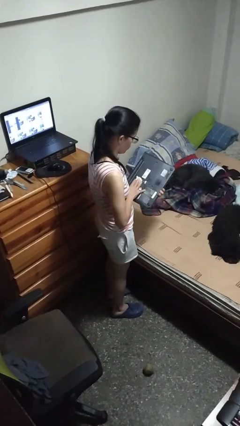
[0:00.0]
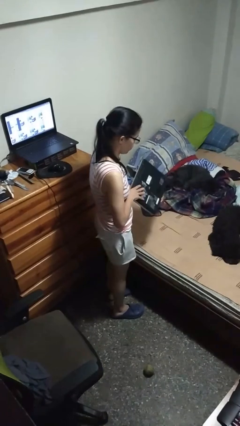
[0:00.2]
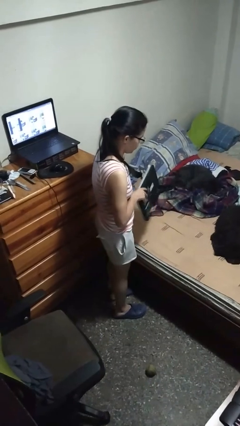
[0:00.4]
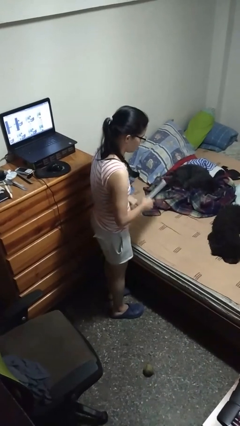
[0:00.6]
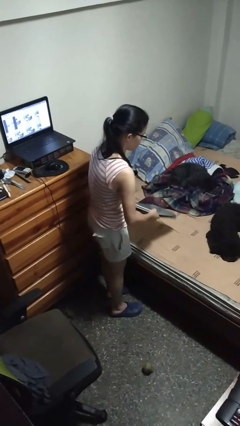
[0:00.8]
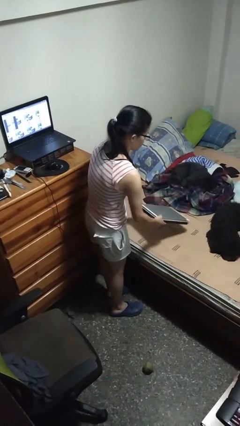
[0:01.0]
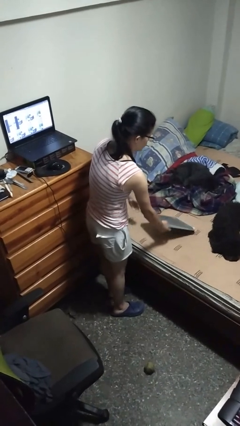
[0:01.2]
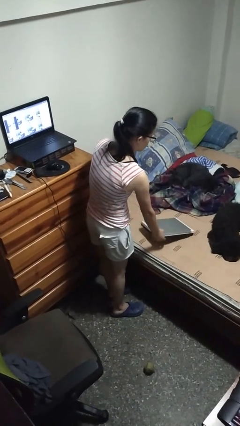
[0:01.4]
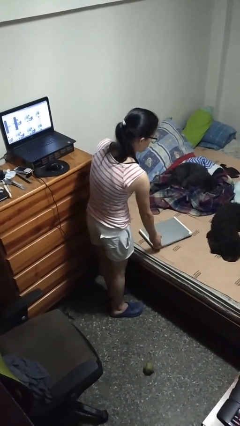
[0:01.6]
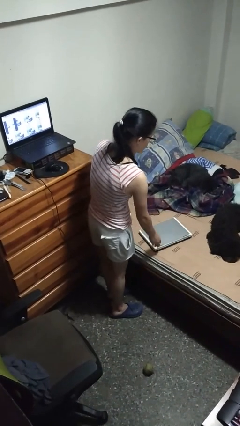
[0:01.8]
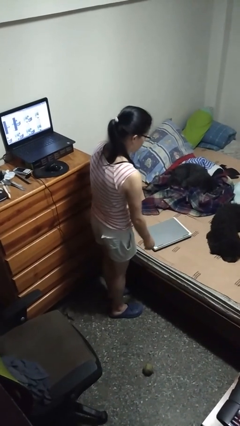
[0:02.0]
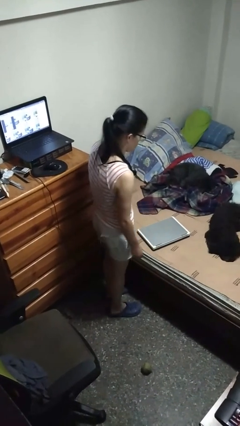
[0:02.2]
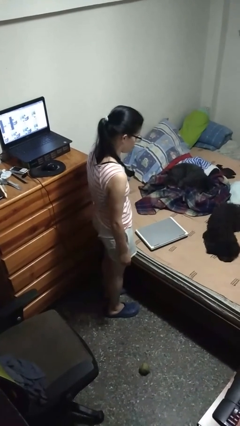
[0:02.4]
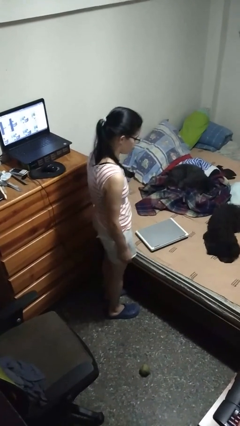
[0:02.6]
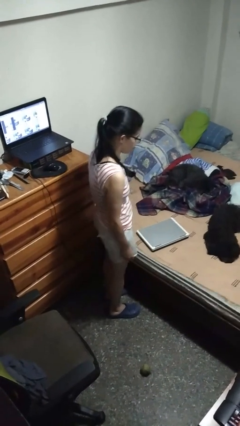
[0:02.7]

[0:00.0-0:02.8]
person puts down object on bed

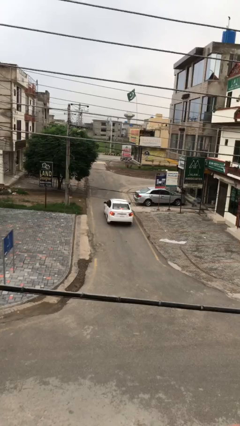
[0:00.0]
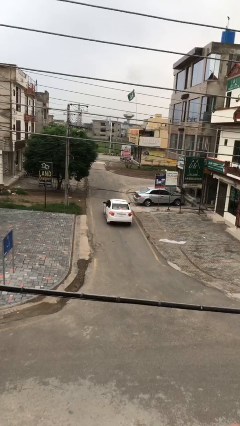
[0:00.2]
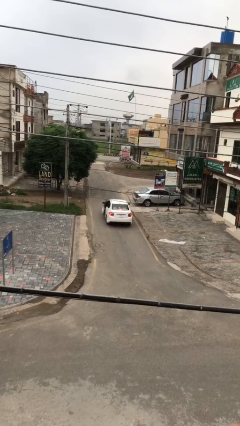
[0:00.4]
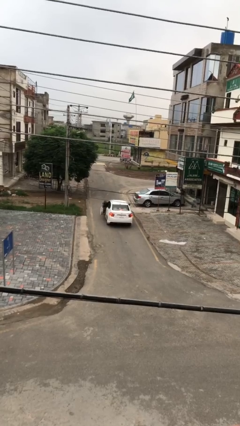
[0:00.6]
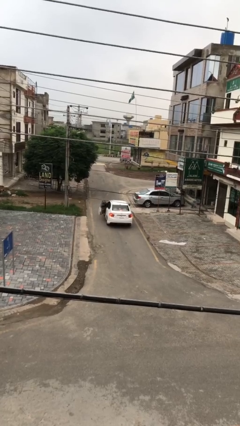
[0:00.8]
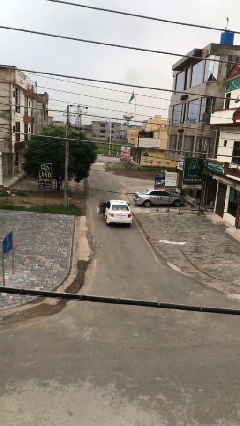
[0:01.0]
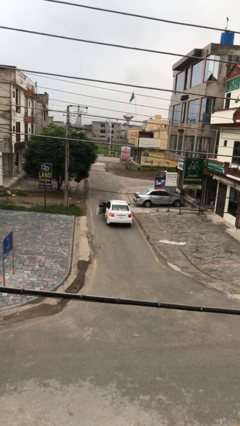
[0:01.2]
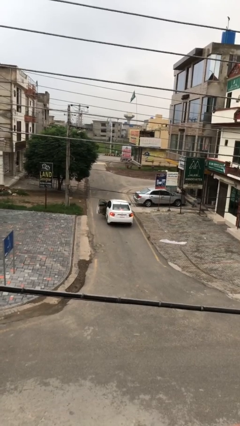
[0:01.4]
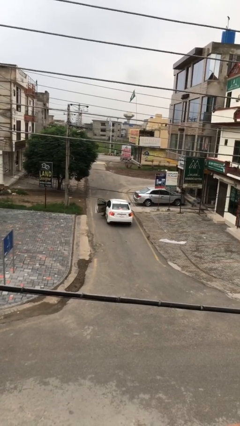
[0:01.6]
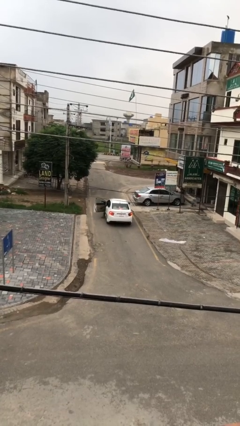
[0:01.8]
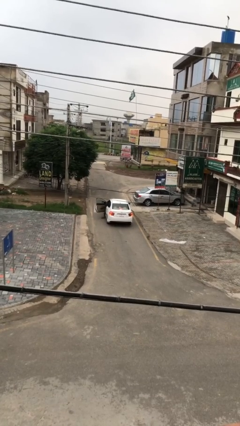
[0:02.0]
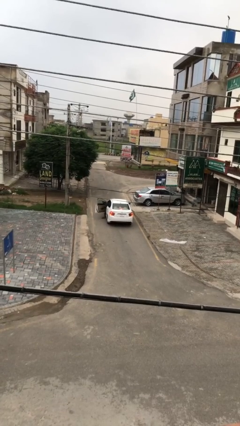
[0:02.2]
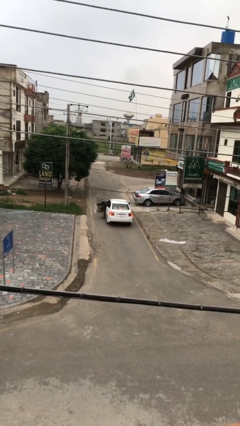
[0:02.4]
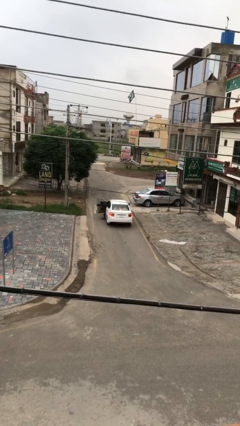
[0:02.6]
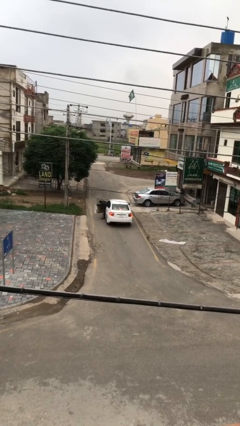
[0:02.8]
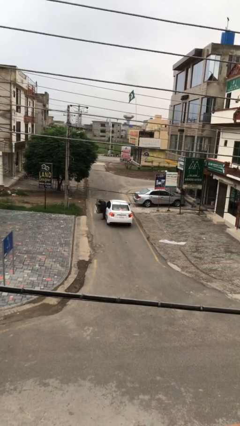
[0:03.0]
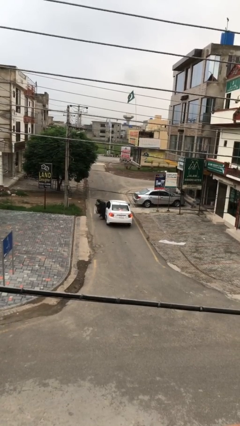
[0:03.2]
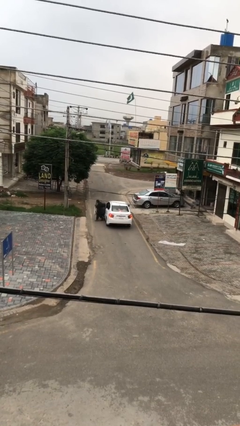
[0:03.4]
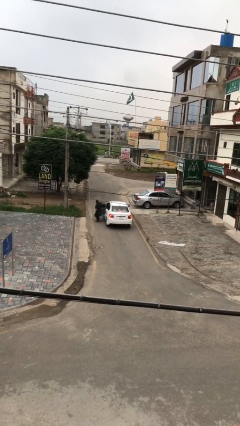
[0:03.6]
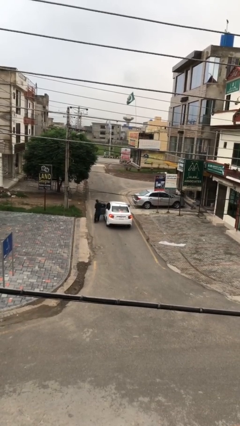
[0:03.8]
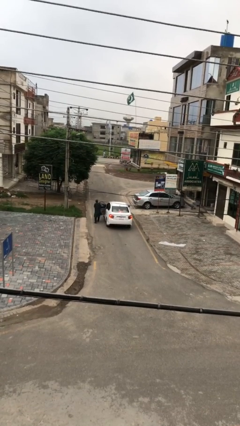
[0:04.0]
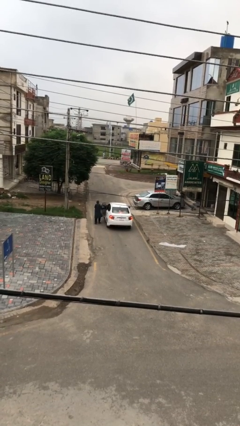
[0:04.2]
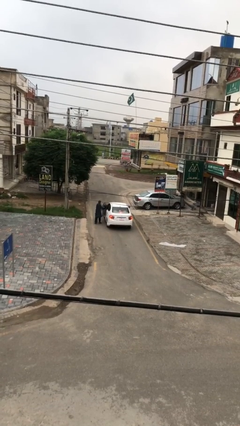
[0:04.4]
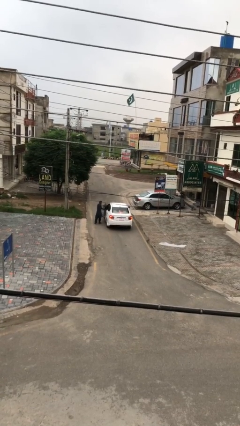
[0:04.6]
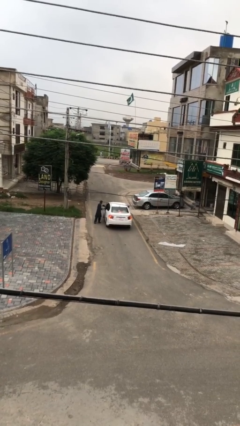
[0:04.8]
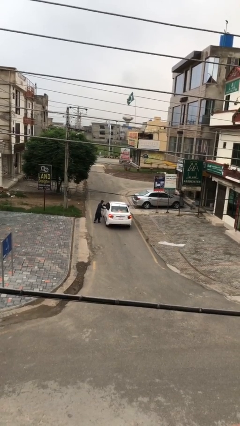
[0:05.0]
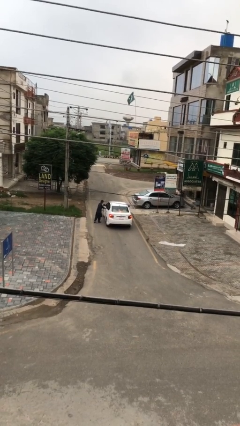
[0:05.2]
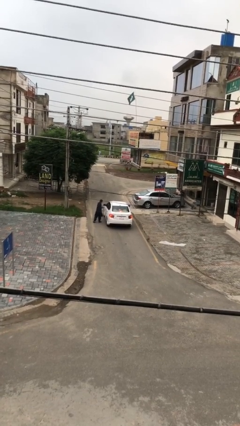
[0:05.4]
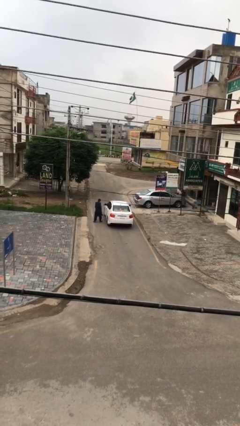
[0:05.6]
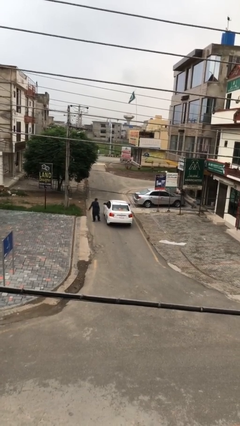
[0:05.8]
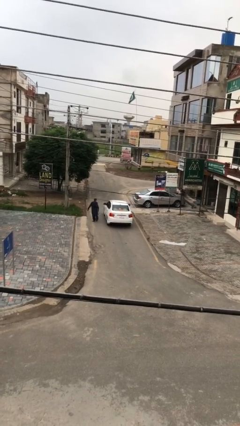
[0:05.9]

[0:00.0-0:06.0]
car drops off person

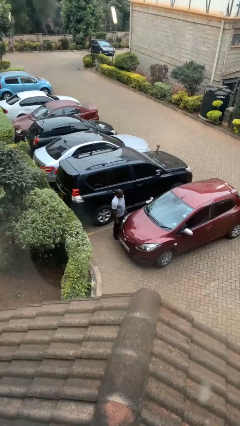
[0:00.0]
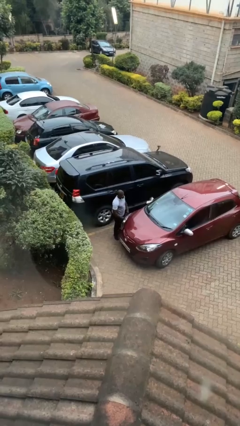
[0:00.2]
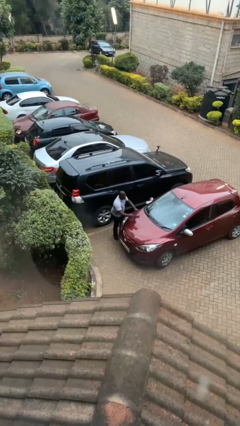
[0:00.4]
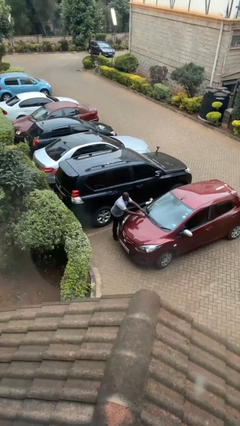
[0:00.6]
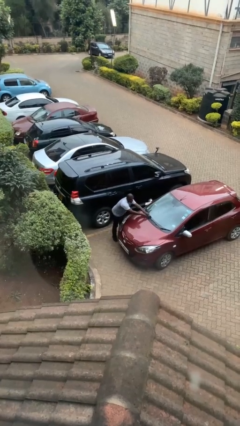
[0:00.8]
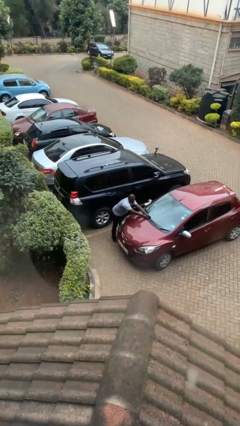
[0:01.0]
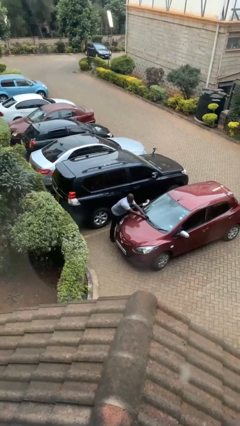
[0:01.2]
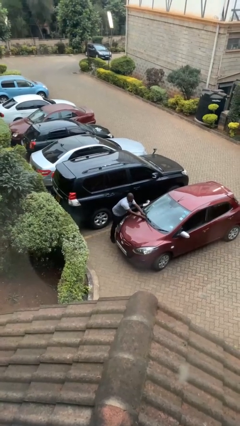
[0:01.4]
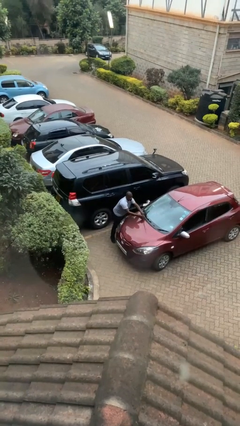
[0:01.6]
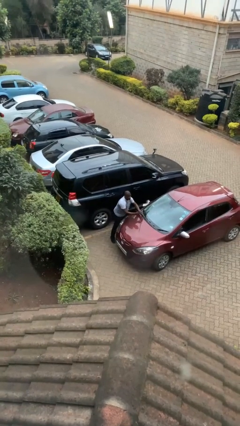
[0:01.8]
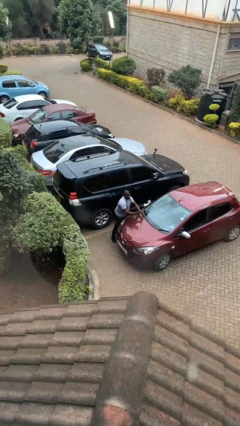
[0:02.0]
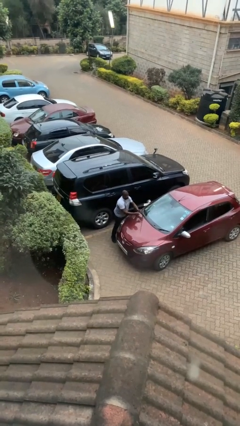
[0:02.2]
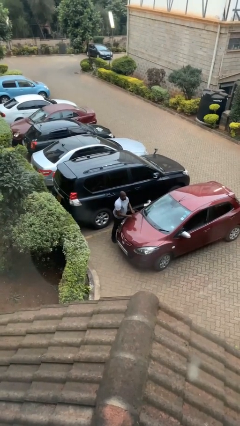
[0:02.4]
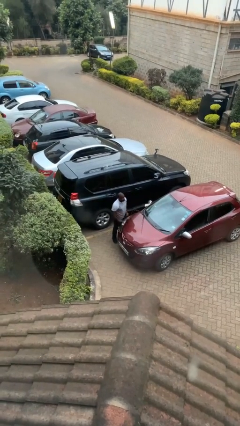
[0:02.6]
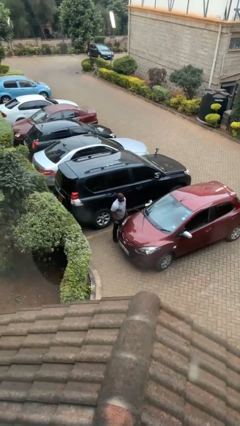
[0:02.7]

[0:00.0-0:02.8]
person flips up car wipers

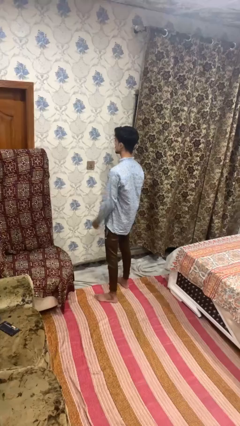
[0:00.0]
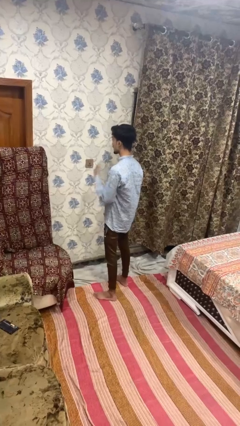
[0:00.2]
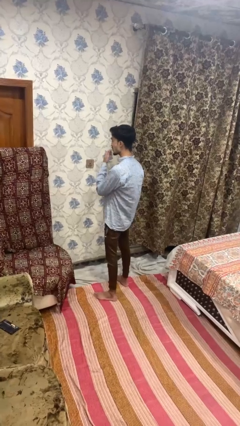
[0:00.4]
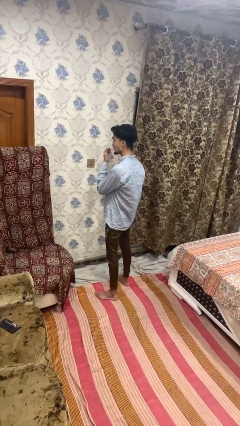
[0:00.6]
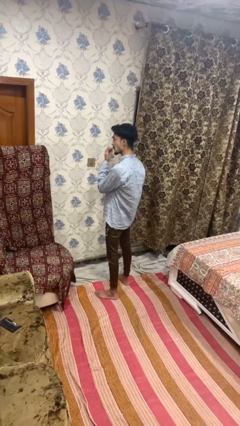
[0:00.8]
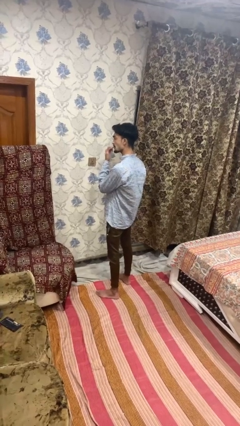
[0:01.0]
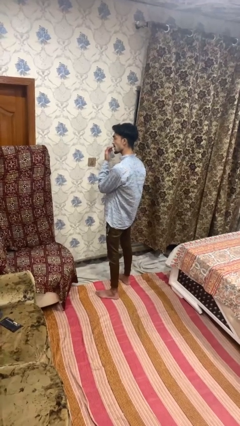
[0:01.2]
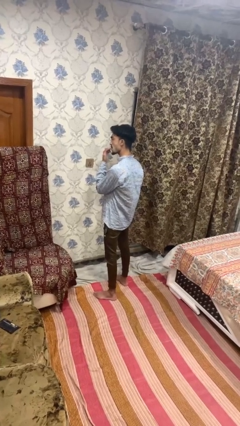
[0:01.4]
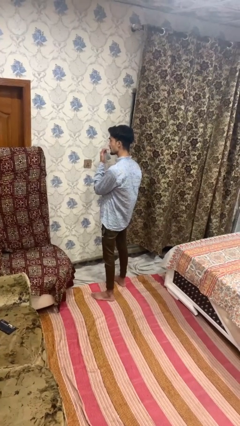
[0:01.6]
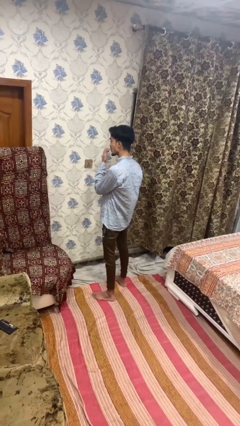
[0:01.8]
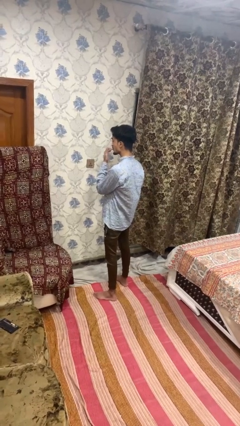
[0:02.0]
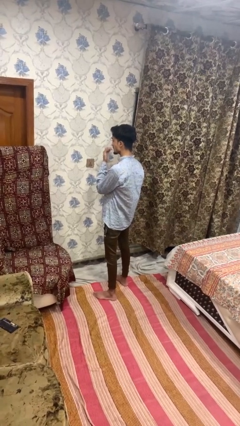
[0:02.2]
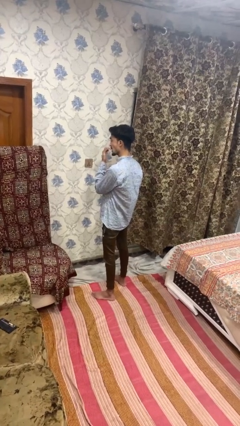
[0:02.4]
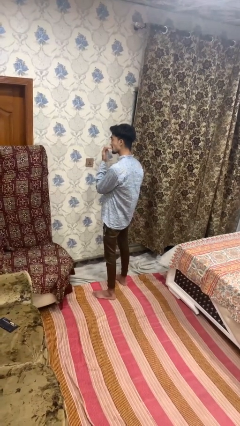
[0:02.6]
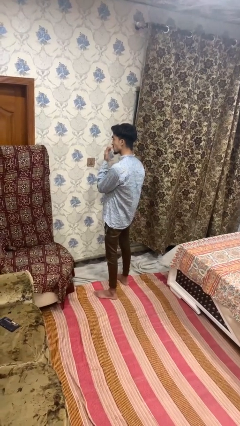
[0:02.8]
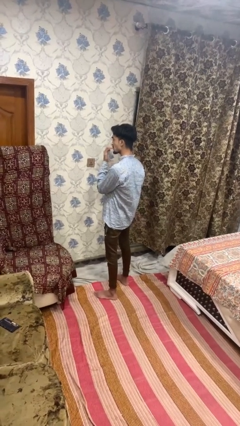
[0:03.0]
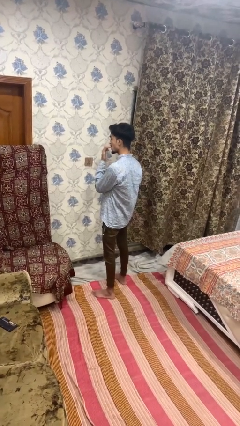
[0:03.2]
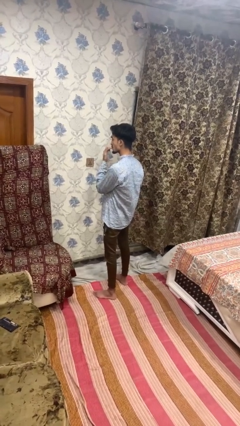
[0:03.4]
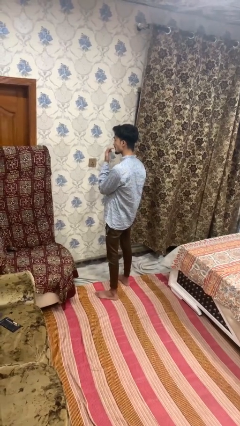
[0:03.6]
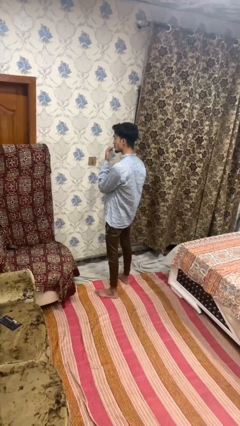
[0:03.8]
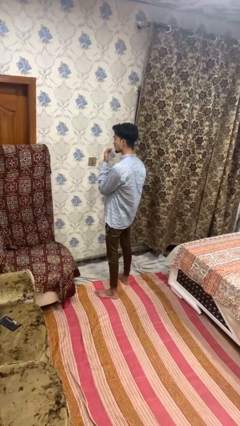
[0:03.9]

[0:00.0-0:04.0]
person licks fingers

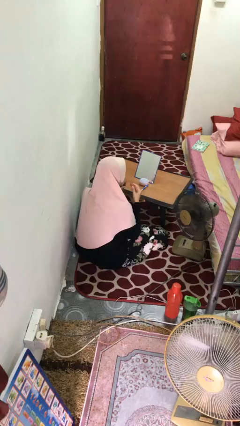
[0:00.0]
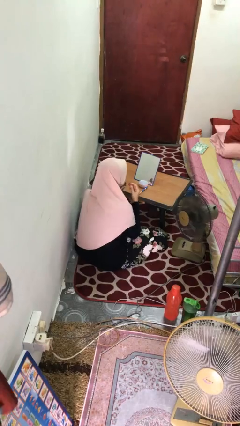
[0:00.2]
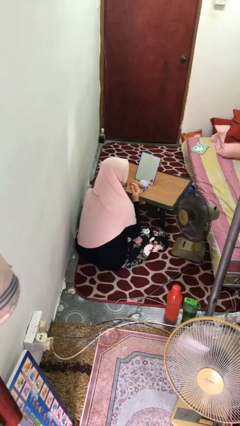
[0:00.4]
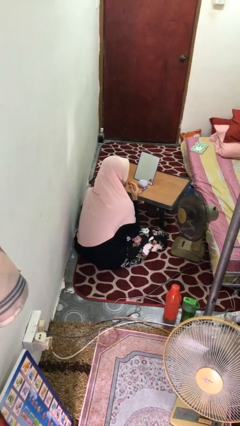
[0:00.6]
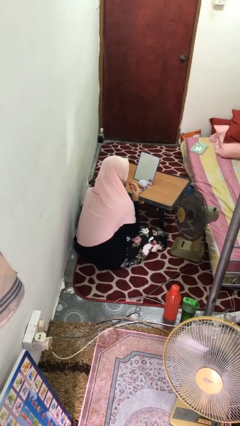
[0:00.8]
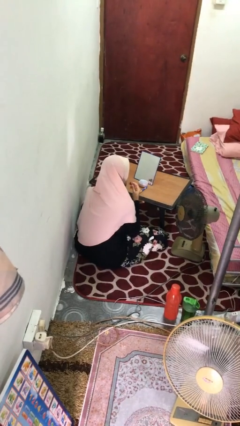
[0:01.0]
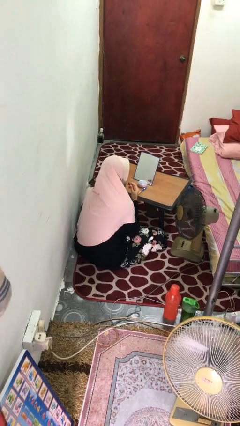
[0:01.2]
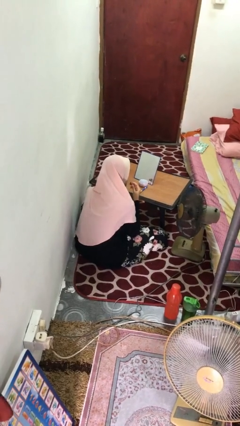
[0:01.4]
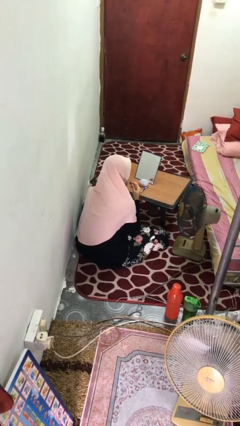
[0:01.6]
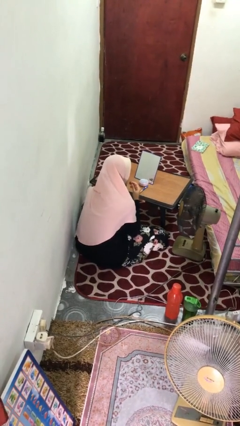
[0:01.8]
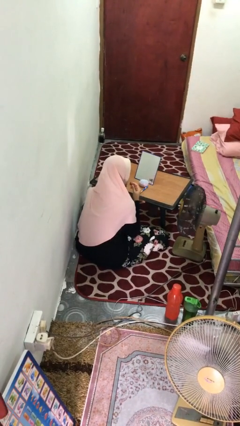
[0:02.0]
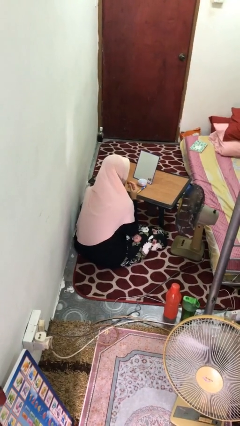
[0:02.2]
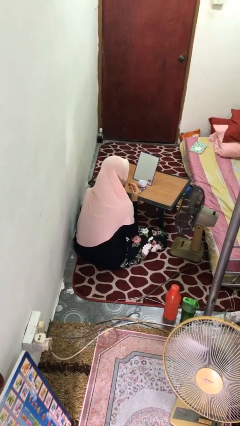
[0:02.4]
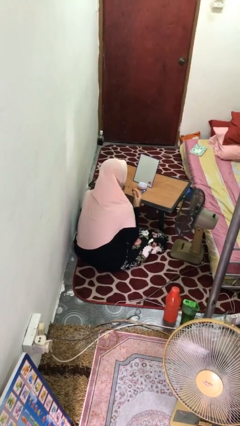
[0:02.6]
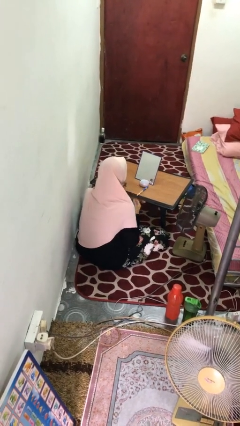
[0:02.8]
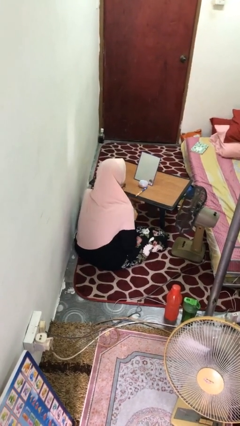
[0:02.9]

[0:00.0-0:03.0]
person applies lip makeup
